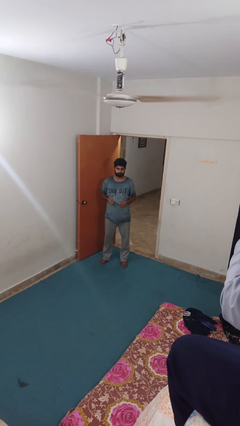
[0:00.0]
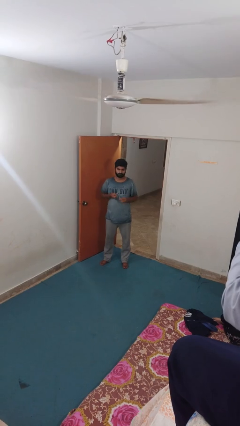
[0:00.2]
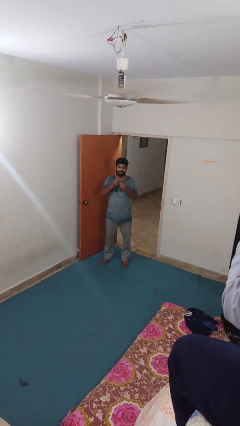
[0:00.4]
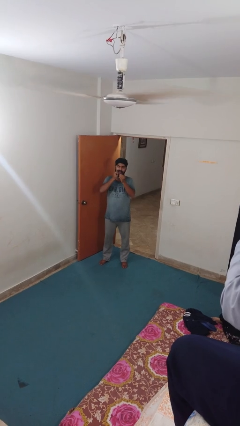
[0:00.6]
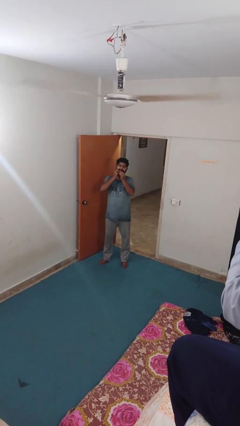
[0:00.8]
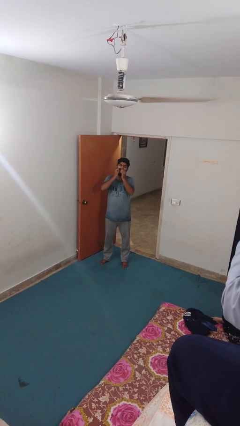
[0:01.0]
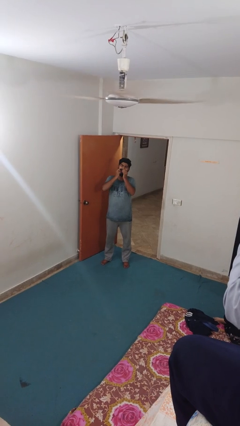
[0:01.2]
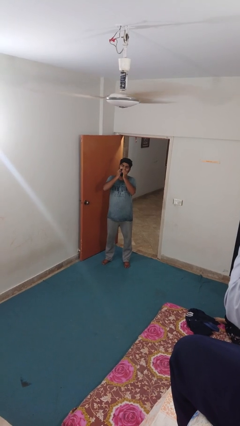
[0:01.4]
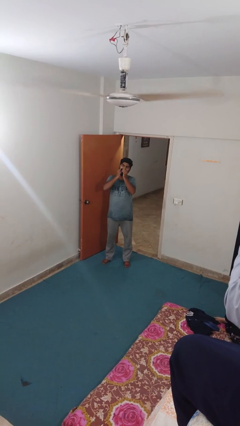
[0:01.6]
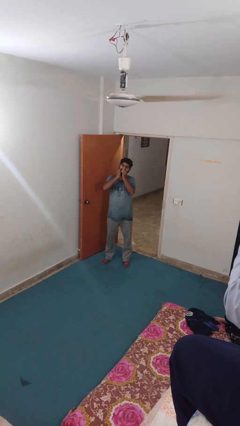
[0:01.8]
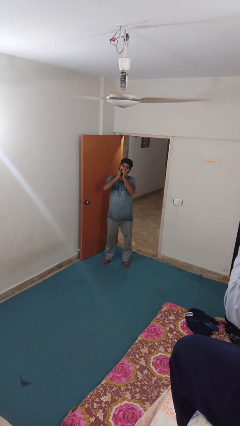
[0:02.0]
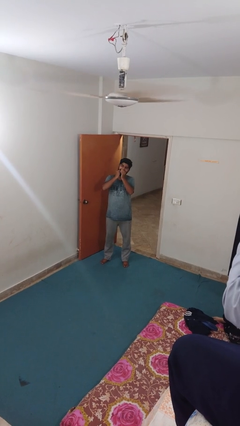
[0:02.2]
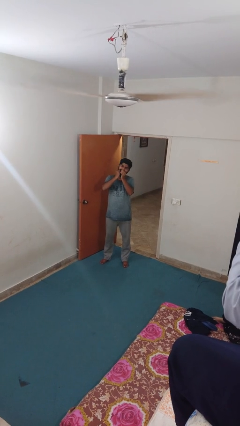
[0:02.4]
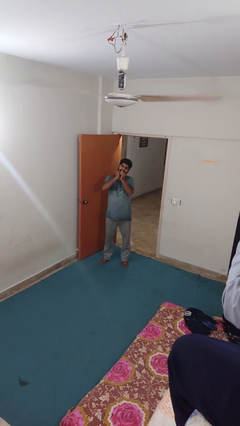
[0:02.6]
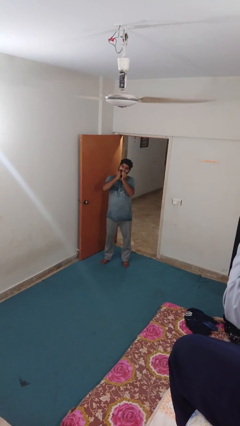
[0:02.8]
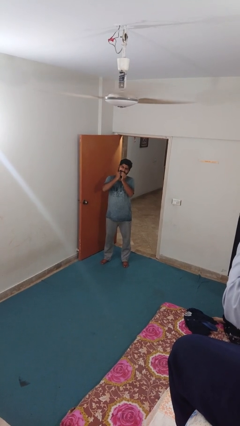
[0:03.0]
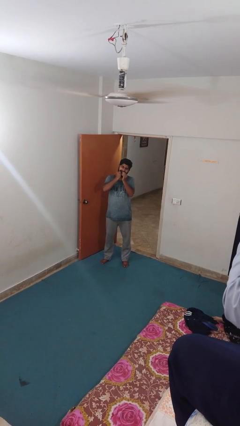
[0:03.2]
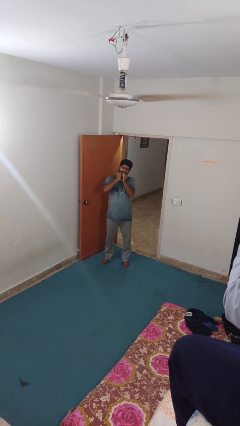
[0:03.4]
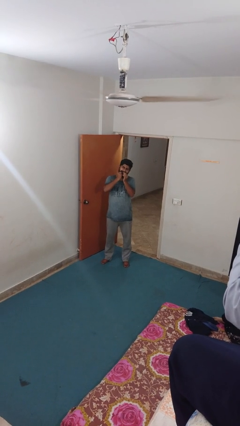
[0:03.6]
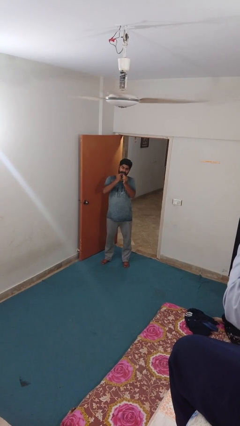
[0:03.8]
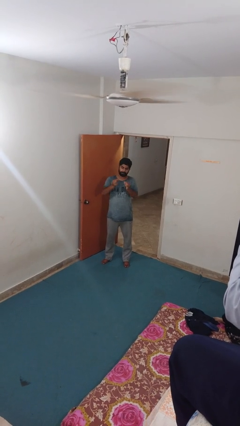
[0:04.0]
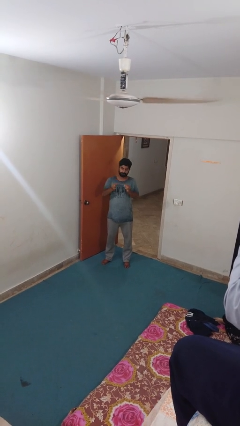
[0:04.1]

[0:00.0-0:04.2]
person flosses

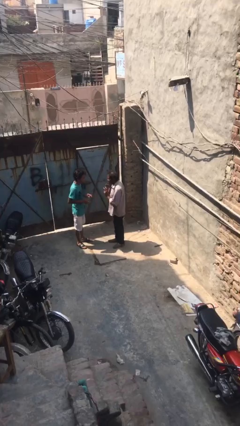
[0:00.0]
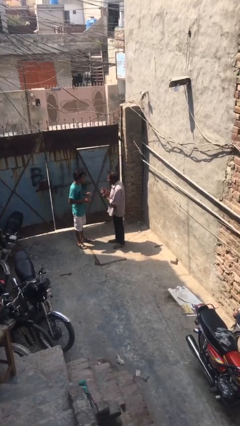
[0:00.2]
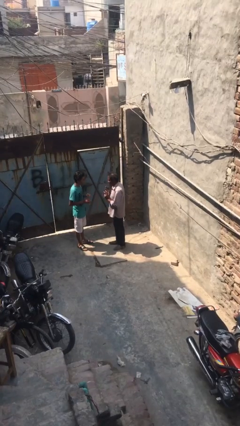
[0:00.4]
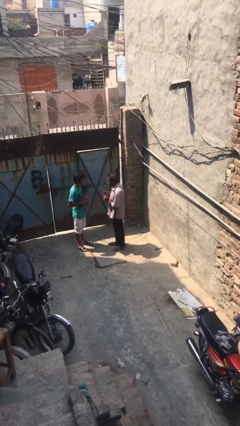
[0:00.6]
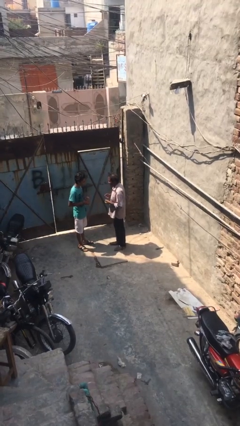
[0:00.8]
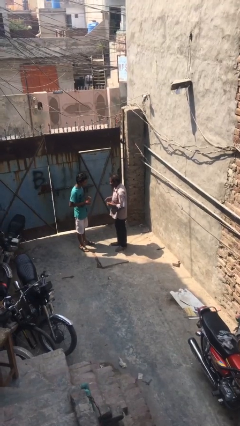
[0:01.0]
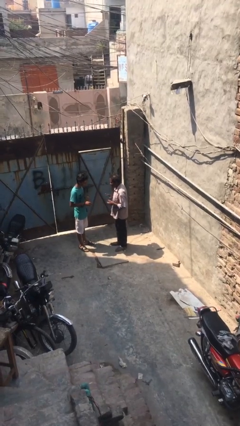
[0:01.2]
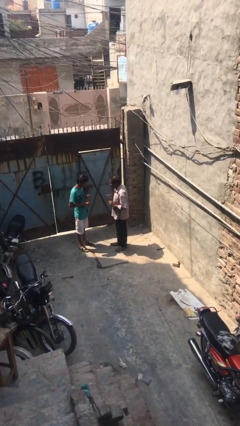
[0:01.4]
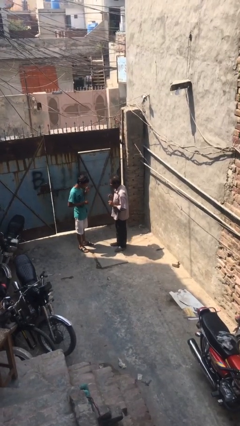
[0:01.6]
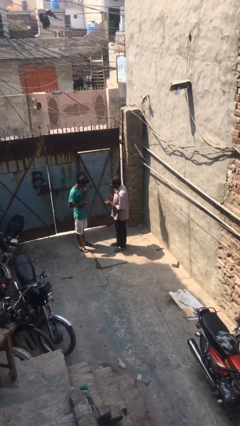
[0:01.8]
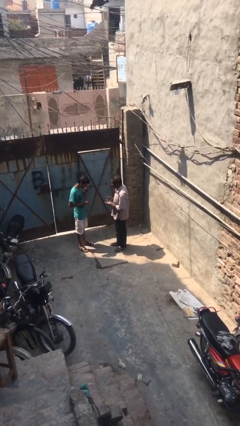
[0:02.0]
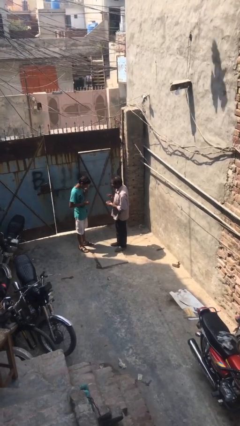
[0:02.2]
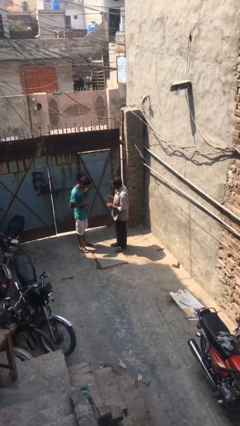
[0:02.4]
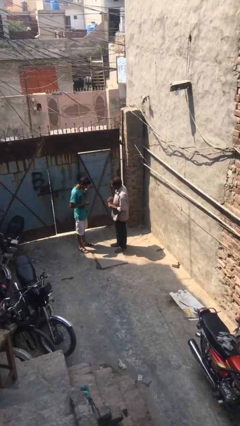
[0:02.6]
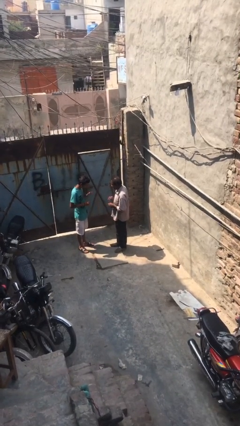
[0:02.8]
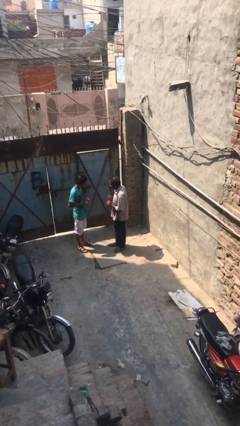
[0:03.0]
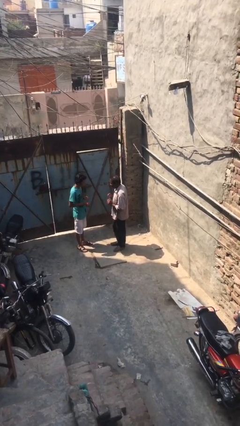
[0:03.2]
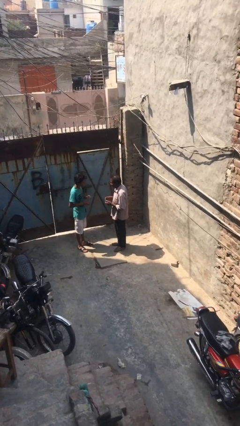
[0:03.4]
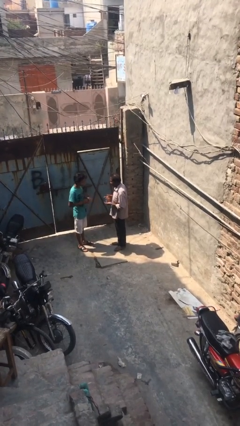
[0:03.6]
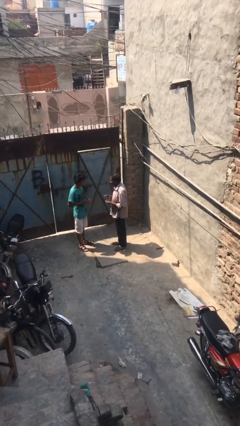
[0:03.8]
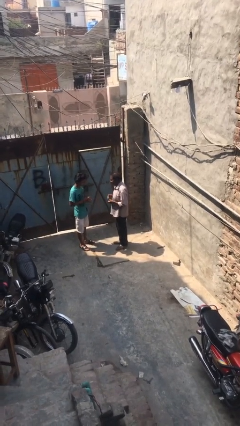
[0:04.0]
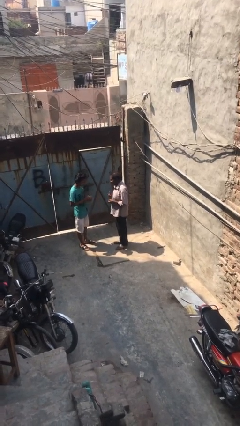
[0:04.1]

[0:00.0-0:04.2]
person talks to person

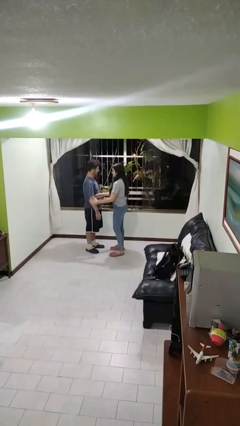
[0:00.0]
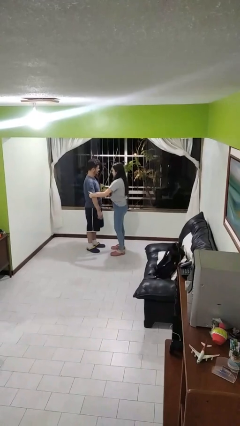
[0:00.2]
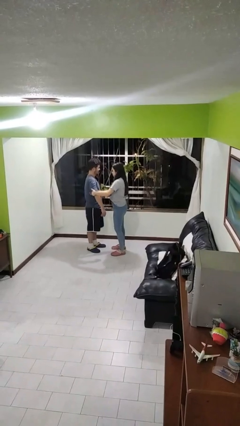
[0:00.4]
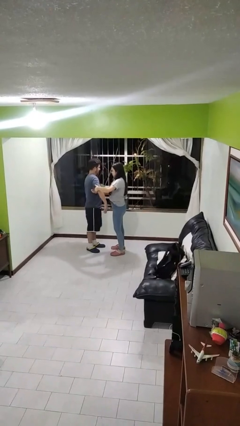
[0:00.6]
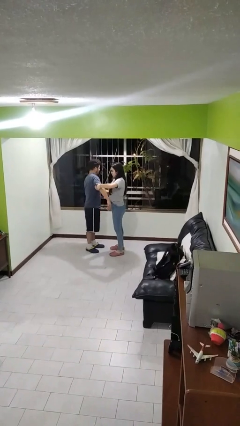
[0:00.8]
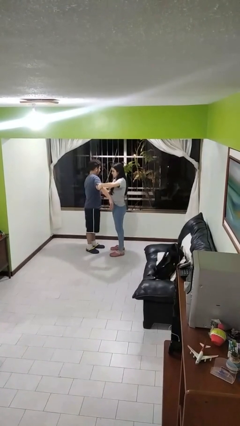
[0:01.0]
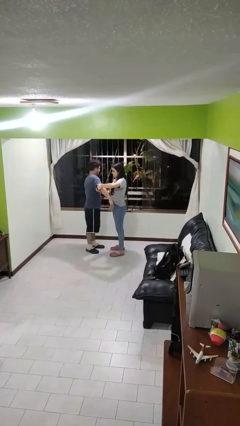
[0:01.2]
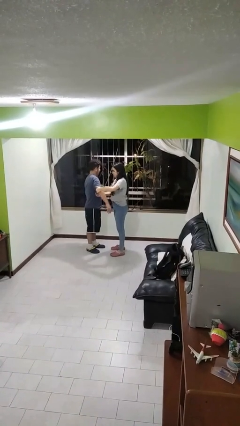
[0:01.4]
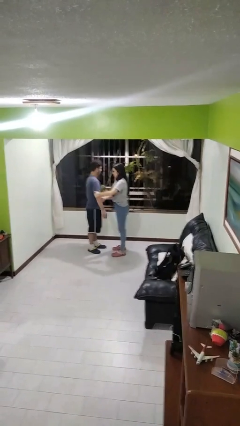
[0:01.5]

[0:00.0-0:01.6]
person grabs person by bicep

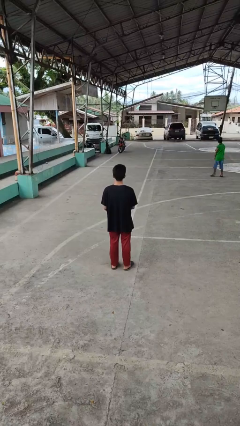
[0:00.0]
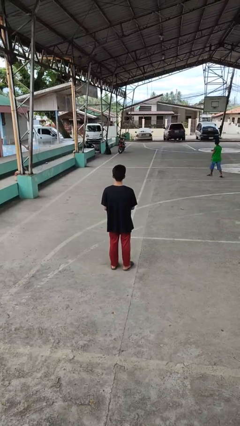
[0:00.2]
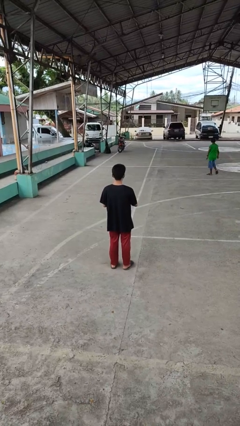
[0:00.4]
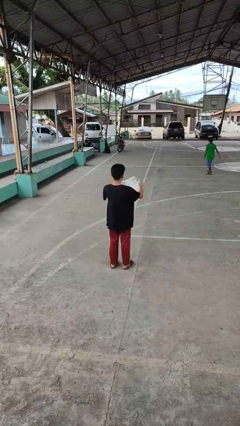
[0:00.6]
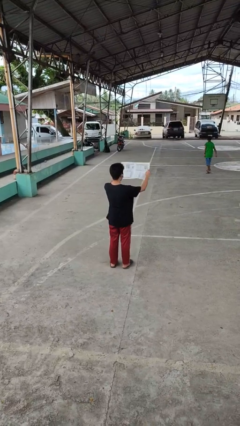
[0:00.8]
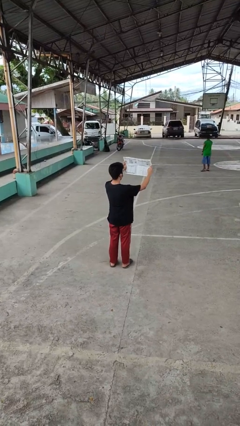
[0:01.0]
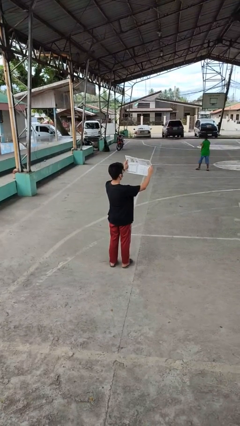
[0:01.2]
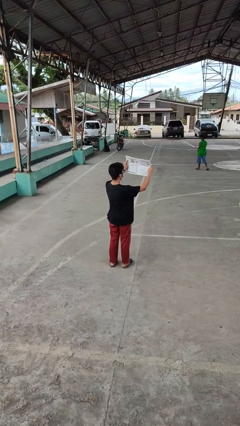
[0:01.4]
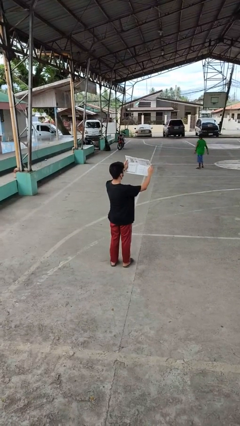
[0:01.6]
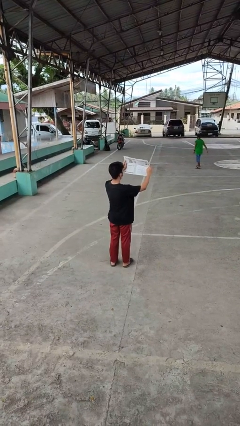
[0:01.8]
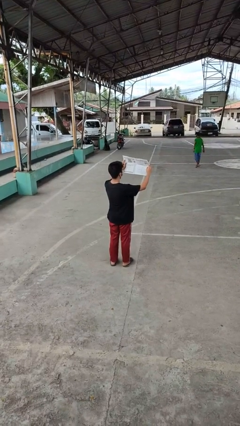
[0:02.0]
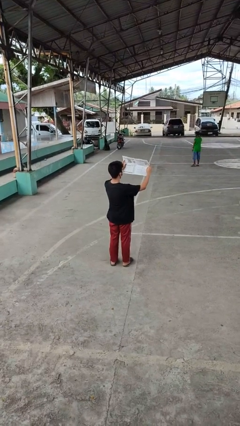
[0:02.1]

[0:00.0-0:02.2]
person reads newspaper

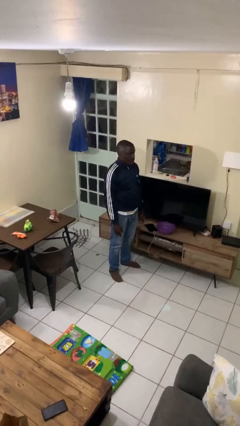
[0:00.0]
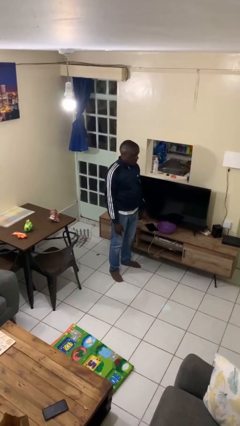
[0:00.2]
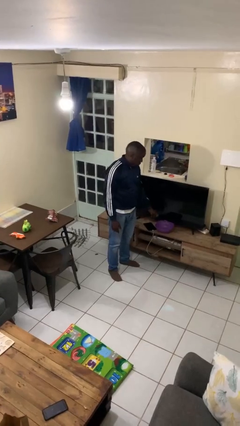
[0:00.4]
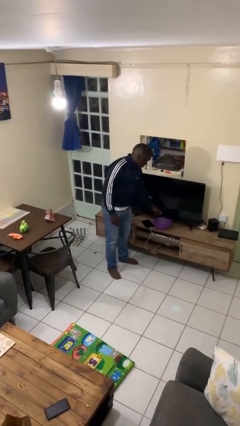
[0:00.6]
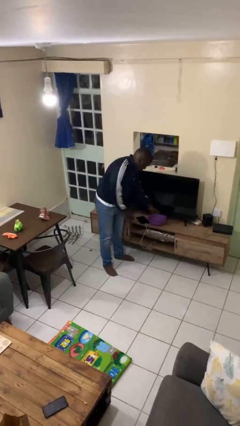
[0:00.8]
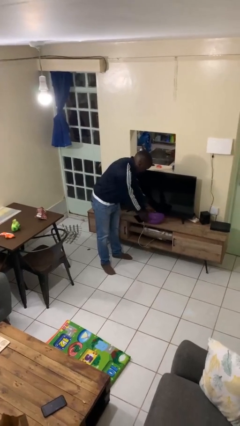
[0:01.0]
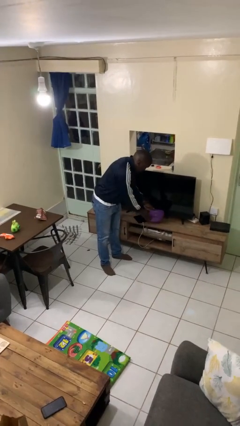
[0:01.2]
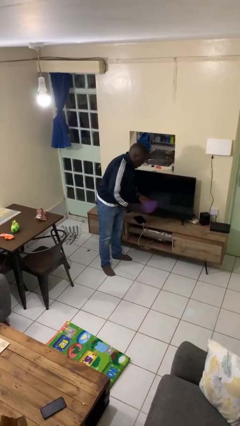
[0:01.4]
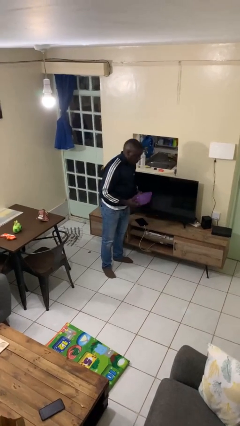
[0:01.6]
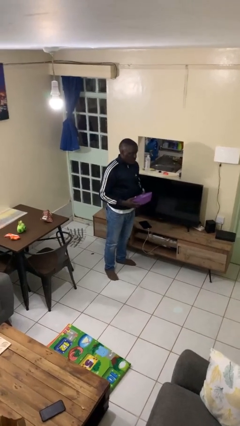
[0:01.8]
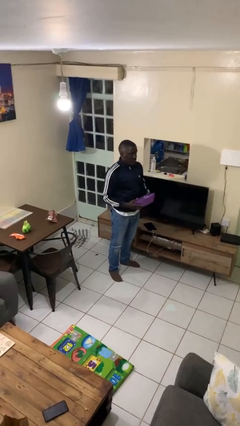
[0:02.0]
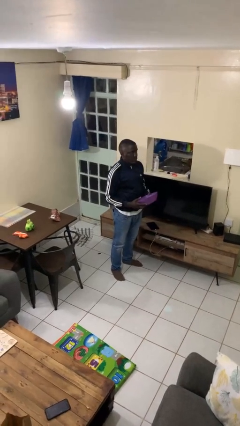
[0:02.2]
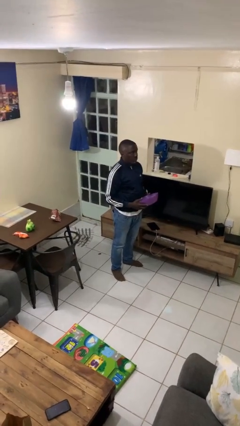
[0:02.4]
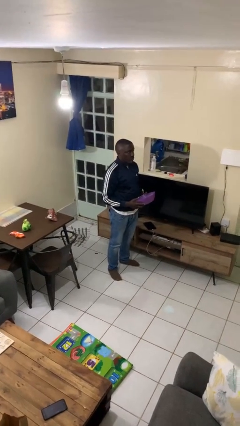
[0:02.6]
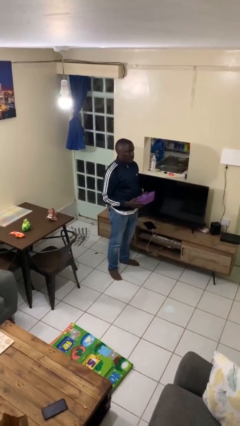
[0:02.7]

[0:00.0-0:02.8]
person picks up object from countertop

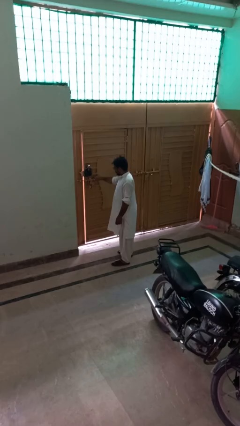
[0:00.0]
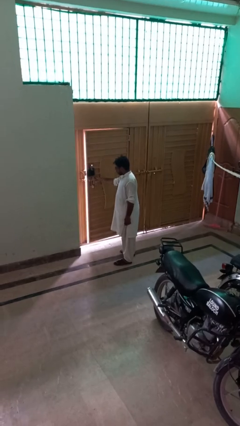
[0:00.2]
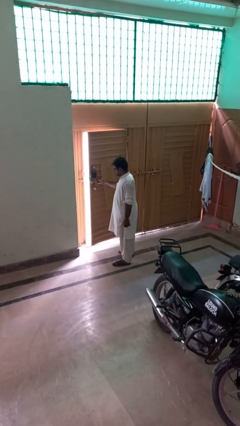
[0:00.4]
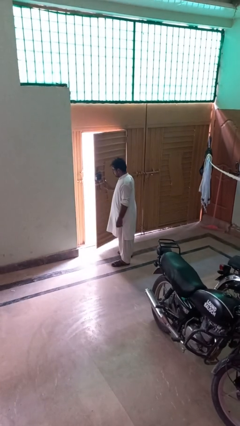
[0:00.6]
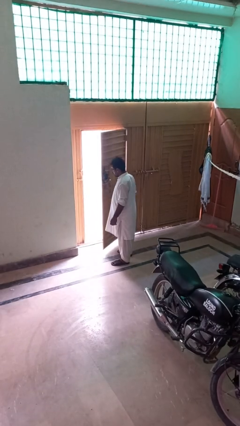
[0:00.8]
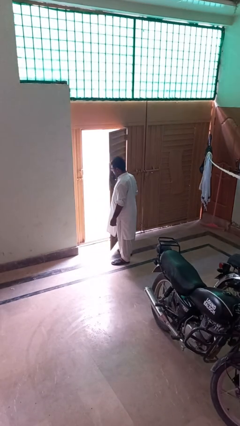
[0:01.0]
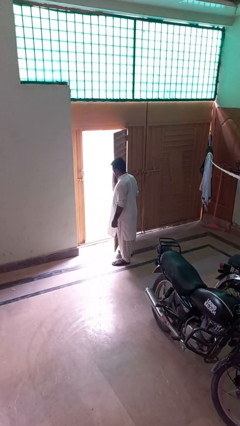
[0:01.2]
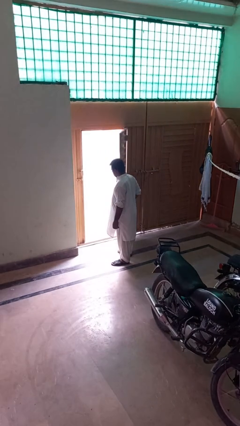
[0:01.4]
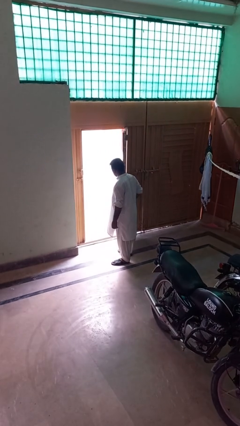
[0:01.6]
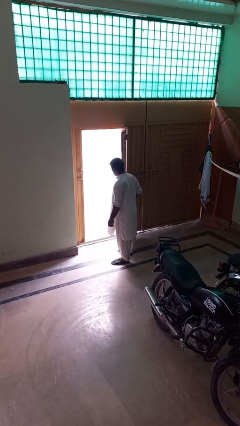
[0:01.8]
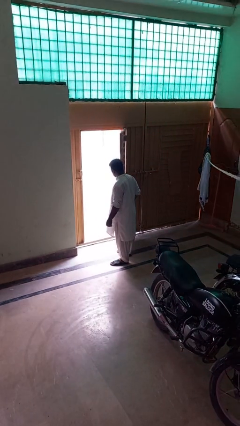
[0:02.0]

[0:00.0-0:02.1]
person opens gate

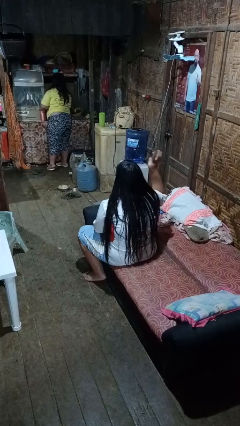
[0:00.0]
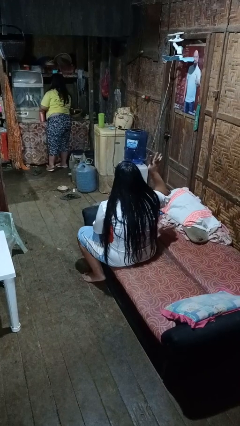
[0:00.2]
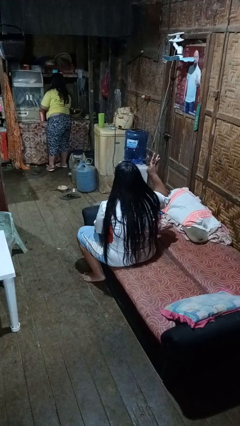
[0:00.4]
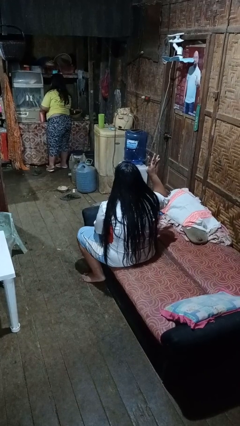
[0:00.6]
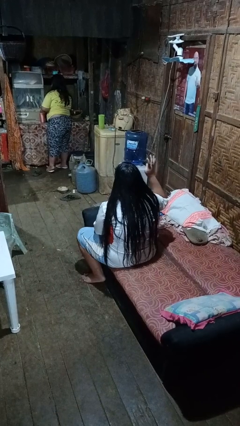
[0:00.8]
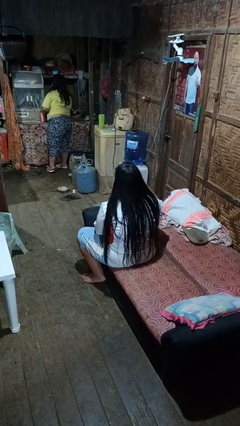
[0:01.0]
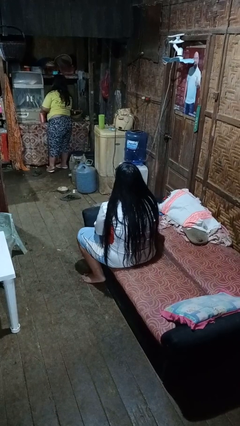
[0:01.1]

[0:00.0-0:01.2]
person gestures number four
